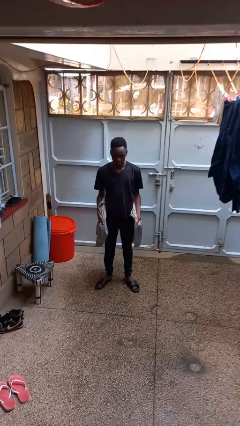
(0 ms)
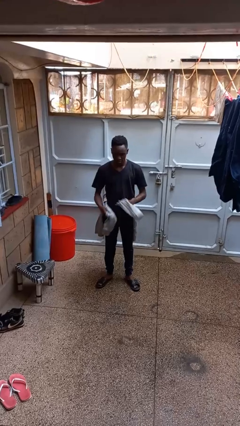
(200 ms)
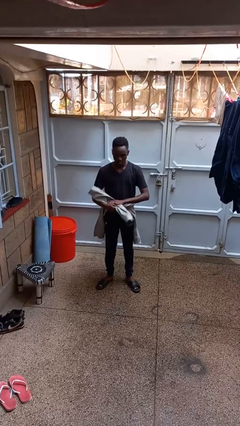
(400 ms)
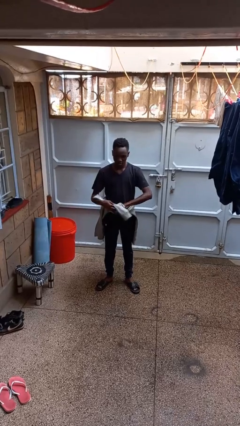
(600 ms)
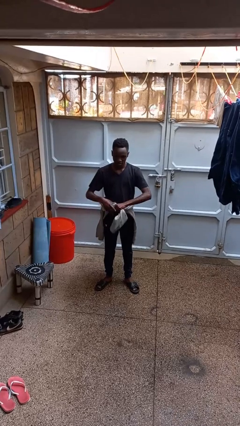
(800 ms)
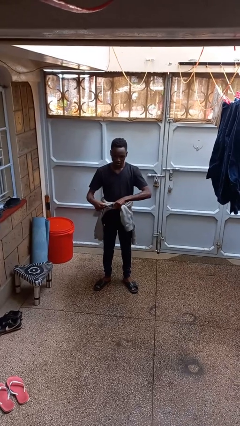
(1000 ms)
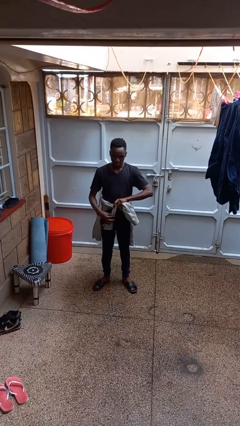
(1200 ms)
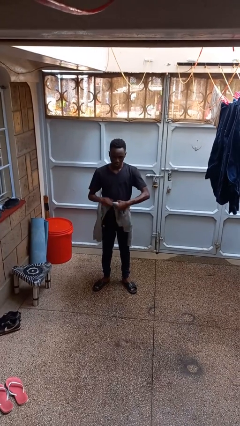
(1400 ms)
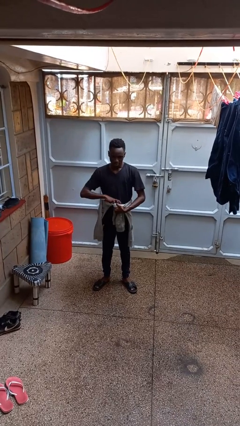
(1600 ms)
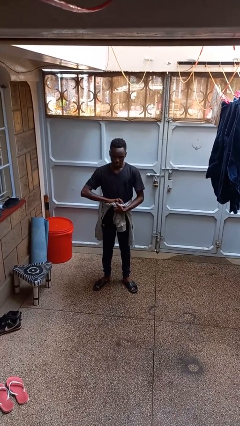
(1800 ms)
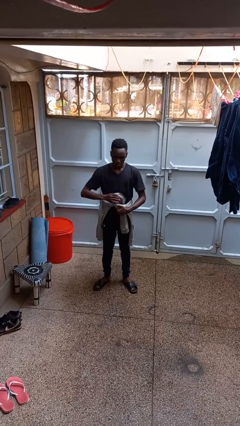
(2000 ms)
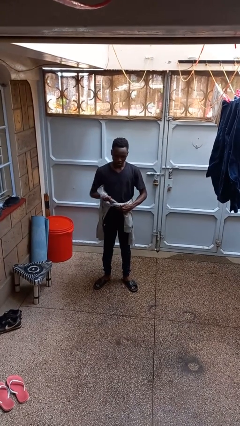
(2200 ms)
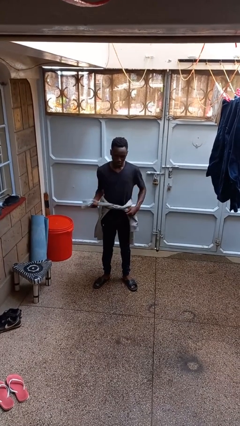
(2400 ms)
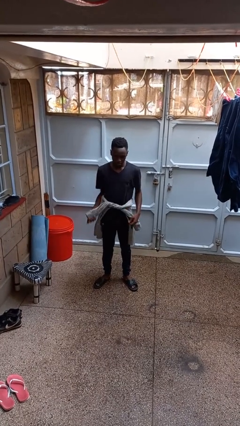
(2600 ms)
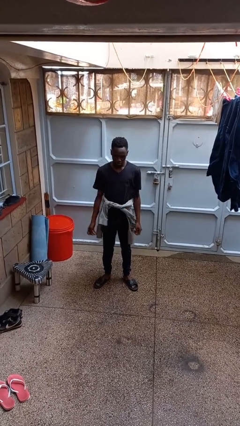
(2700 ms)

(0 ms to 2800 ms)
person ties jacket around waist

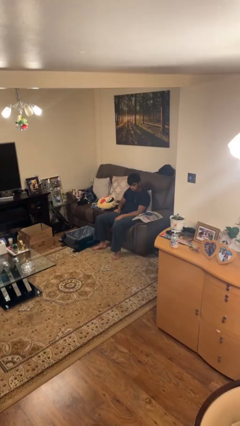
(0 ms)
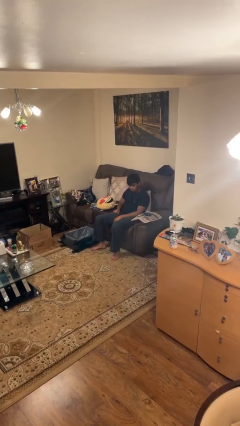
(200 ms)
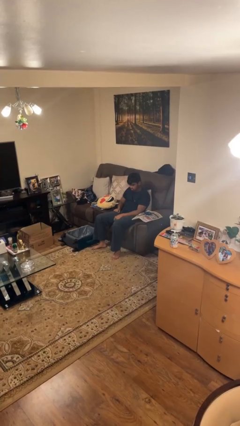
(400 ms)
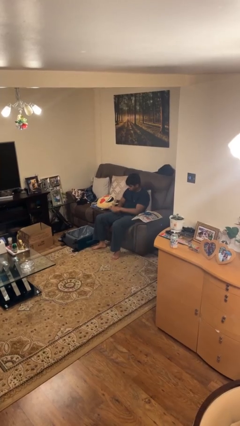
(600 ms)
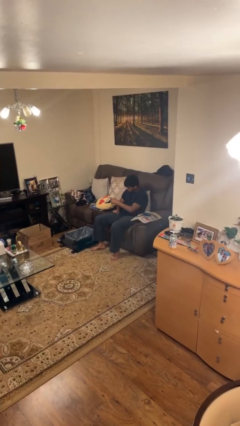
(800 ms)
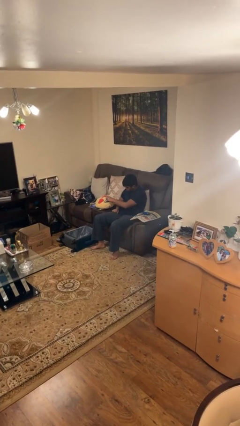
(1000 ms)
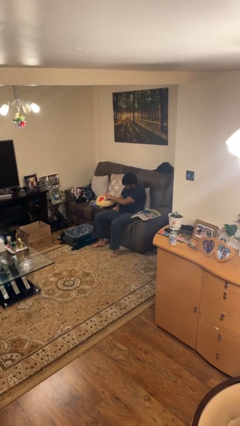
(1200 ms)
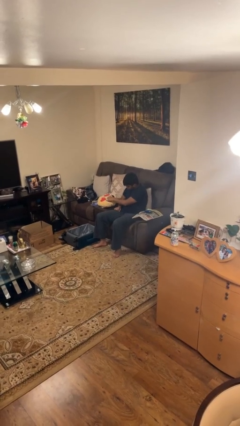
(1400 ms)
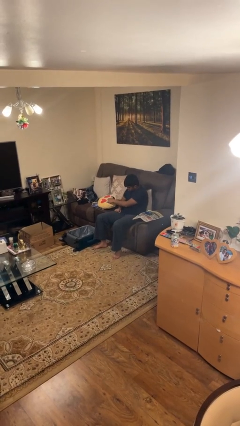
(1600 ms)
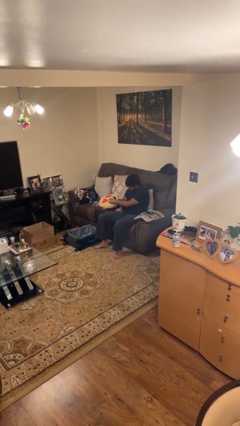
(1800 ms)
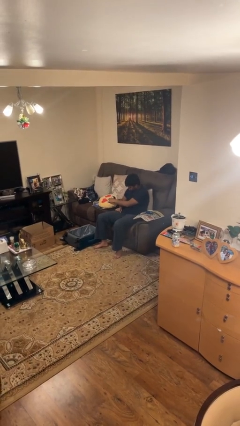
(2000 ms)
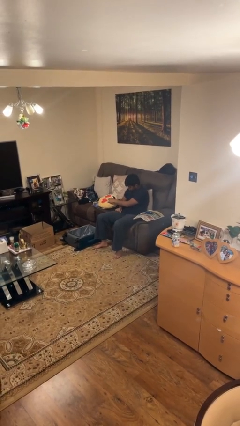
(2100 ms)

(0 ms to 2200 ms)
person taps object with finger

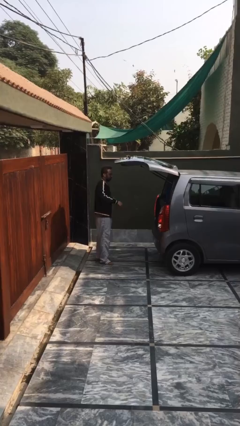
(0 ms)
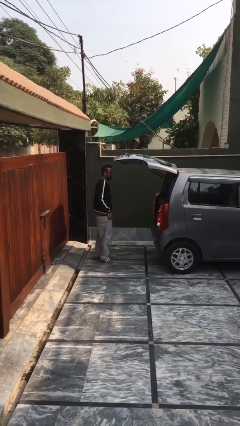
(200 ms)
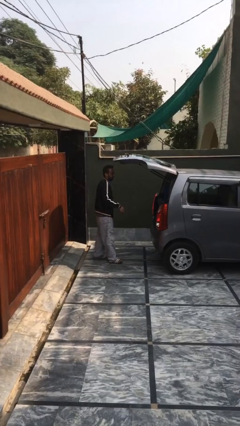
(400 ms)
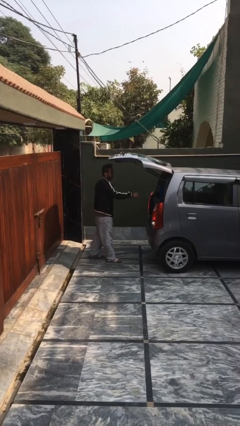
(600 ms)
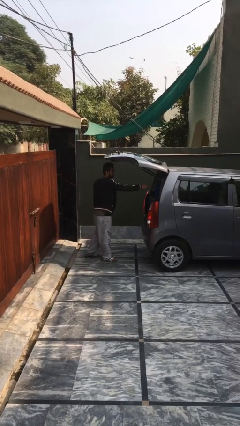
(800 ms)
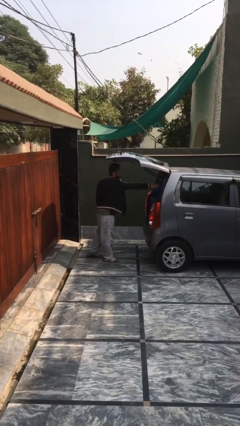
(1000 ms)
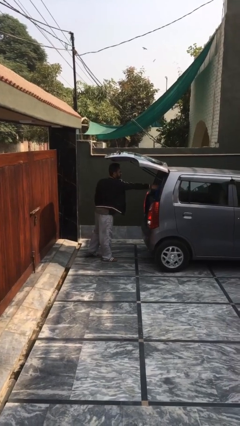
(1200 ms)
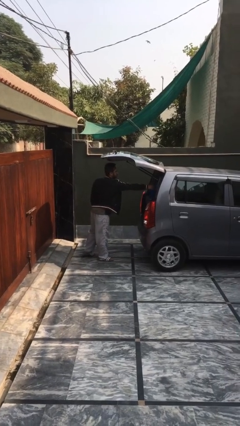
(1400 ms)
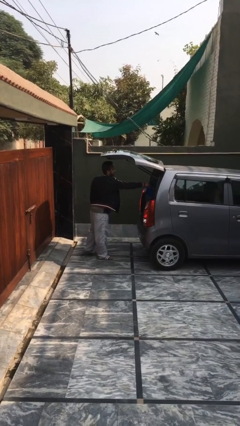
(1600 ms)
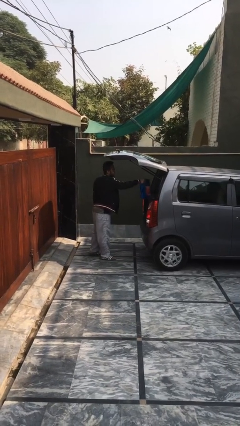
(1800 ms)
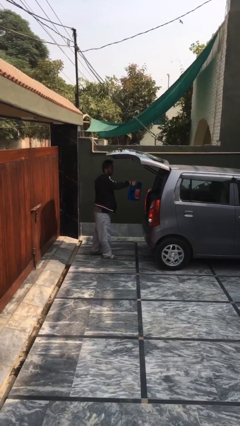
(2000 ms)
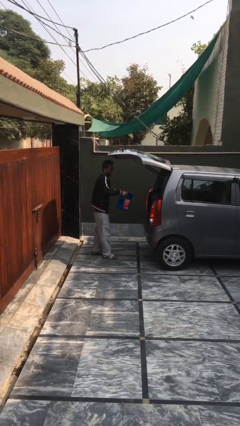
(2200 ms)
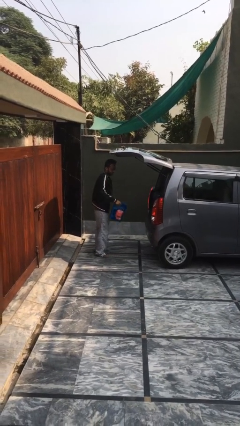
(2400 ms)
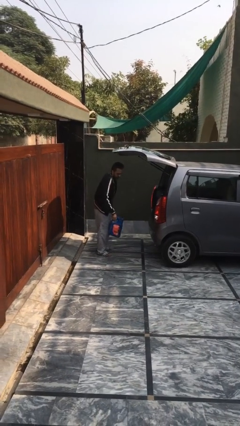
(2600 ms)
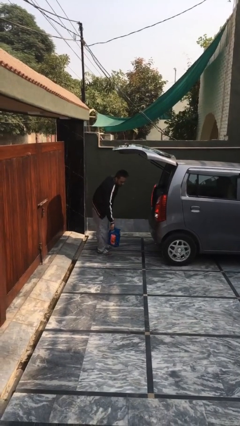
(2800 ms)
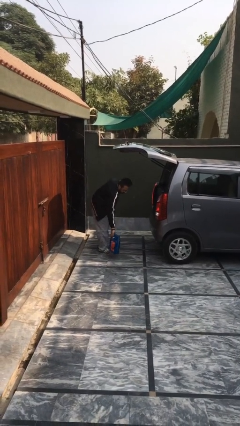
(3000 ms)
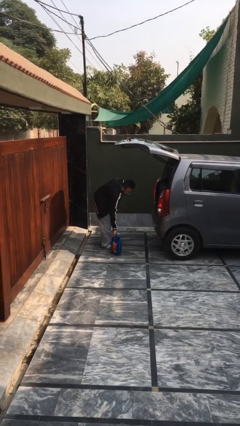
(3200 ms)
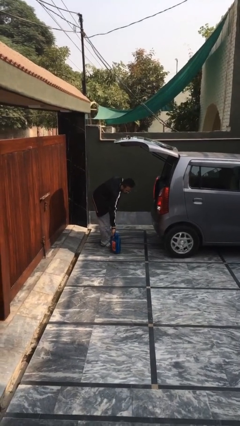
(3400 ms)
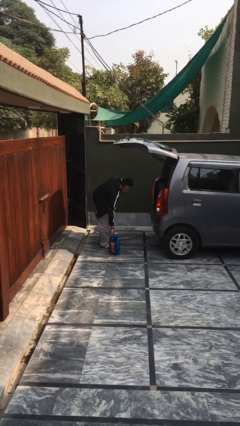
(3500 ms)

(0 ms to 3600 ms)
person unloads car

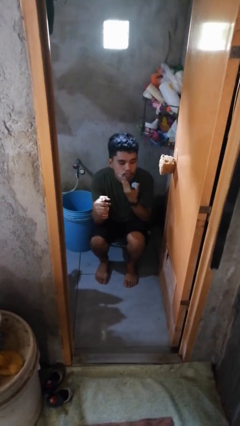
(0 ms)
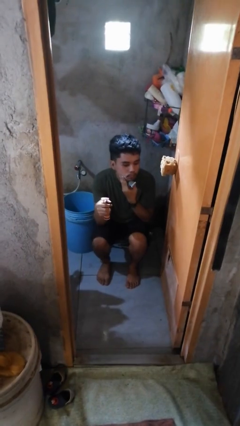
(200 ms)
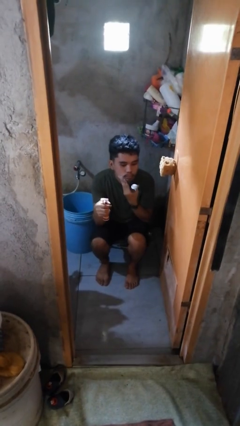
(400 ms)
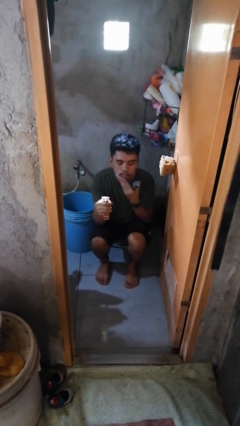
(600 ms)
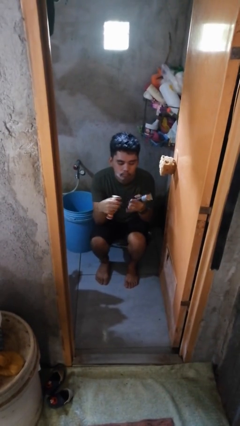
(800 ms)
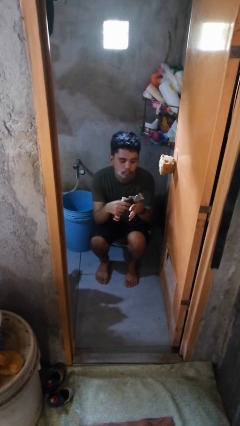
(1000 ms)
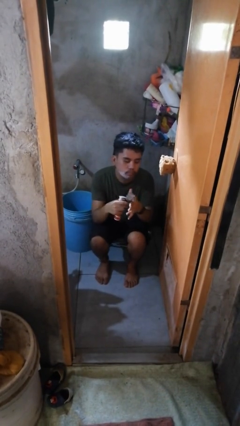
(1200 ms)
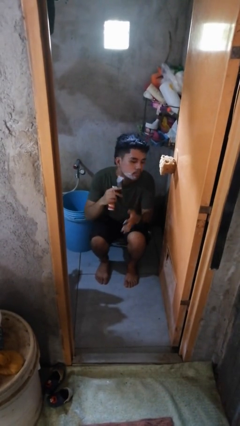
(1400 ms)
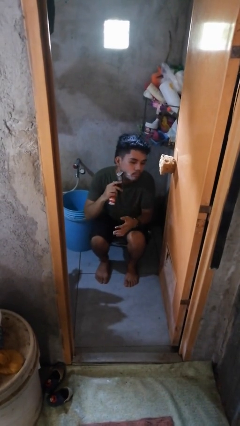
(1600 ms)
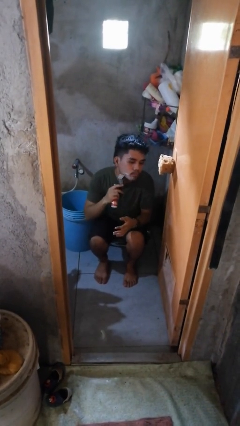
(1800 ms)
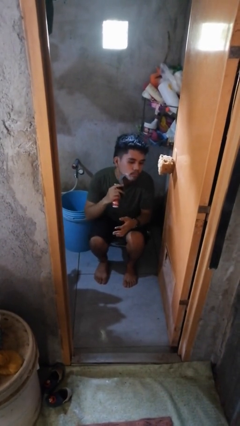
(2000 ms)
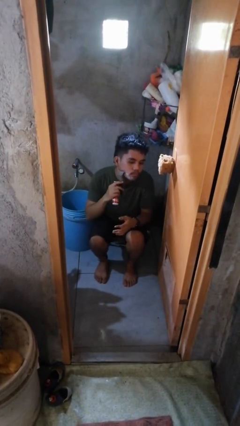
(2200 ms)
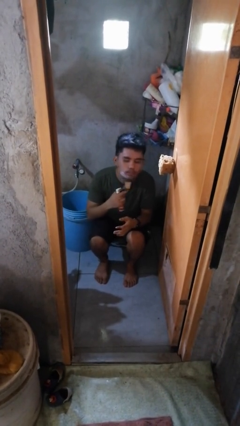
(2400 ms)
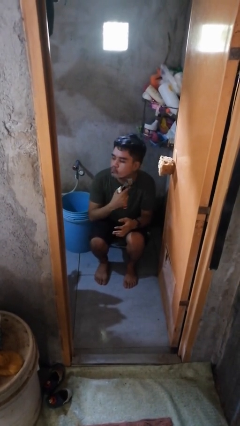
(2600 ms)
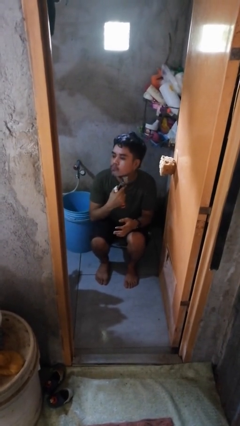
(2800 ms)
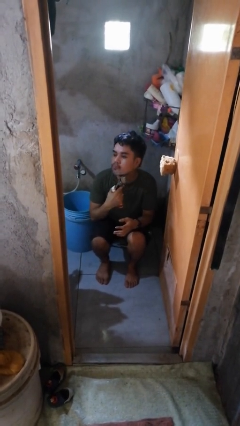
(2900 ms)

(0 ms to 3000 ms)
person shaves face

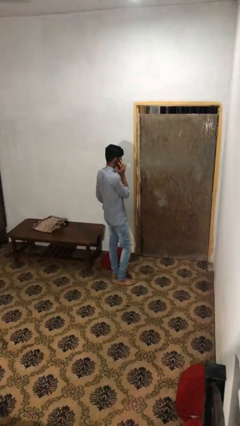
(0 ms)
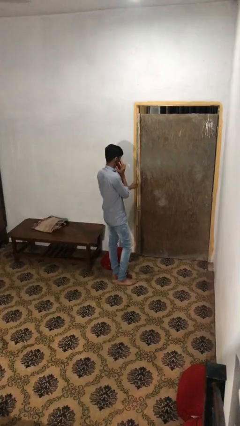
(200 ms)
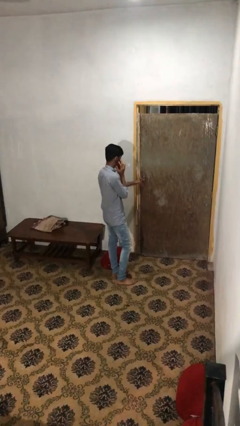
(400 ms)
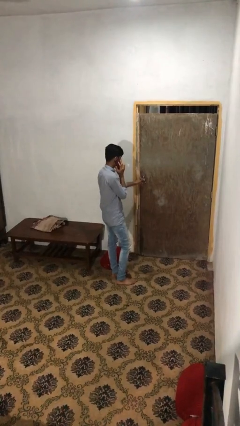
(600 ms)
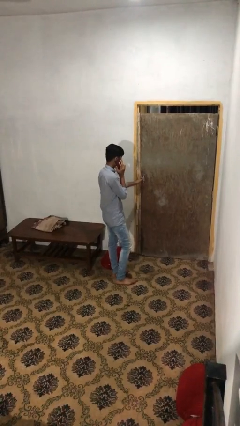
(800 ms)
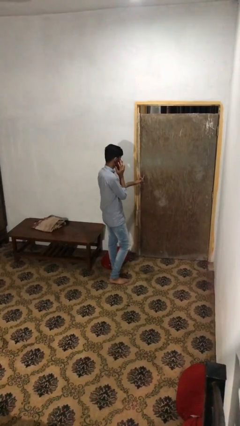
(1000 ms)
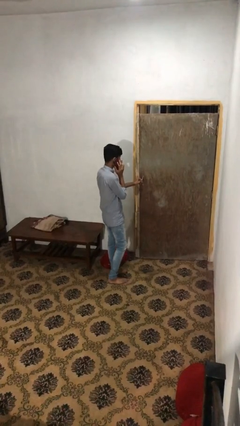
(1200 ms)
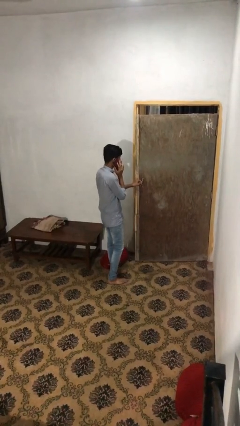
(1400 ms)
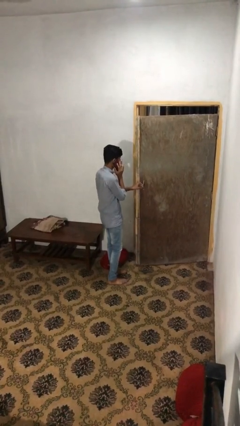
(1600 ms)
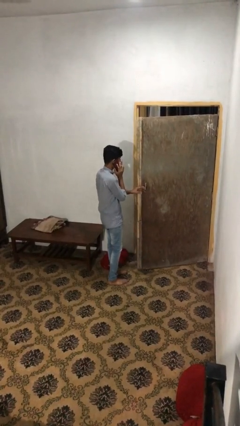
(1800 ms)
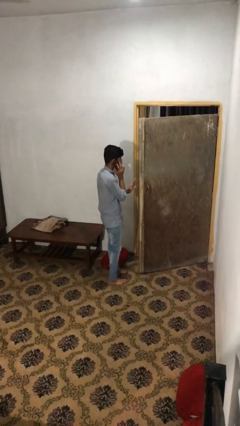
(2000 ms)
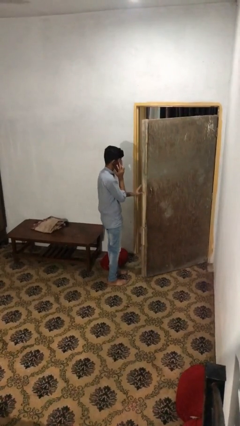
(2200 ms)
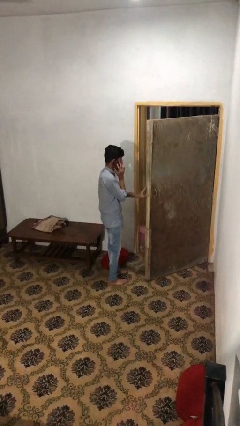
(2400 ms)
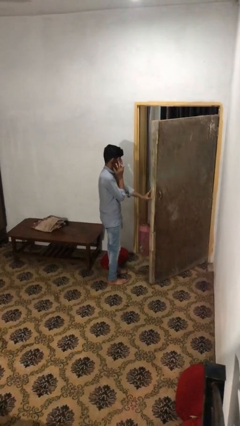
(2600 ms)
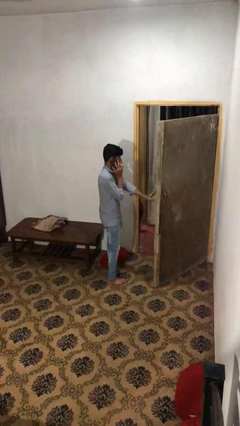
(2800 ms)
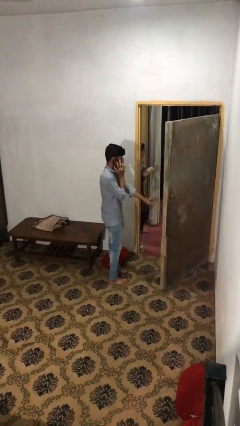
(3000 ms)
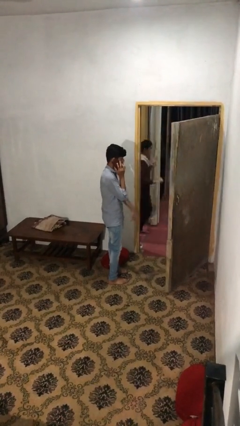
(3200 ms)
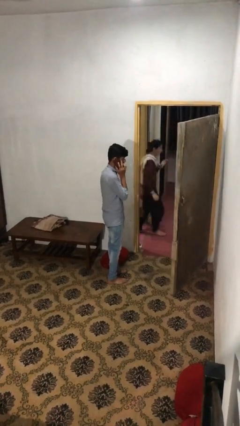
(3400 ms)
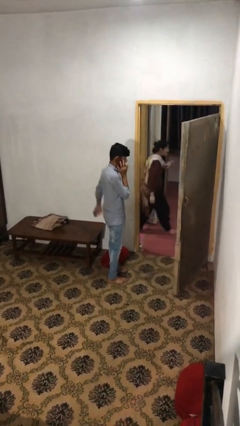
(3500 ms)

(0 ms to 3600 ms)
person opens facility door

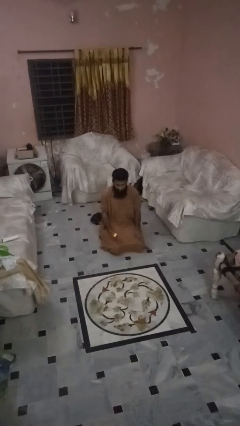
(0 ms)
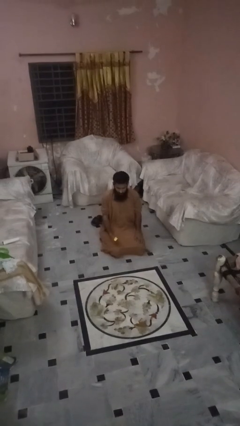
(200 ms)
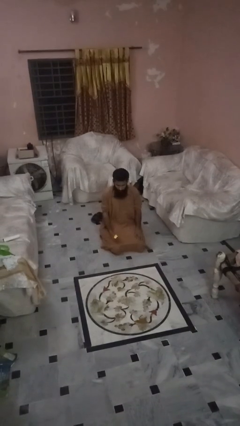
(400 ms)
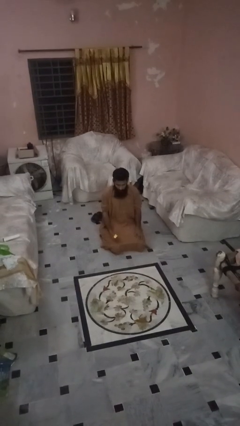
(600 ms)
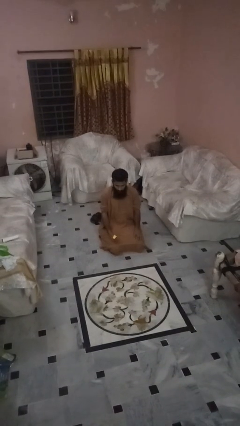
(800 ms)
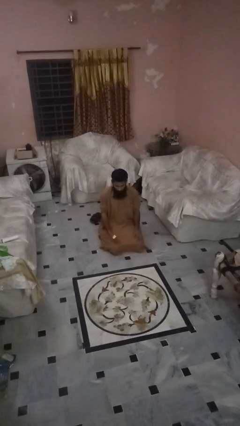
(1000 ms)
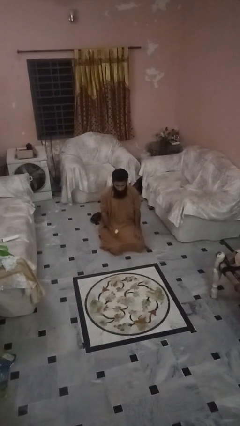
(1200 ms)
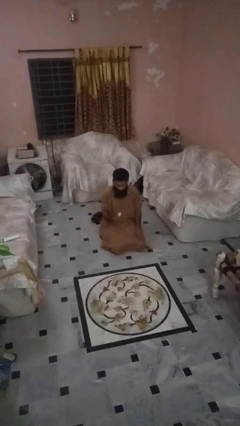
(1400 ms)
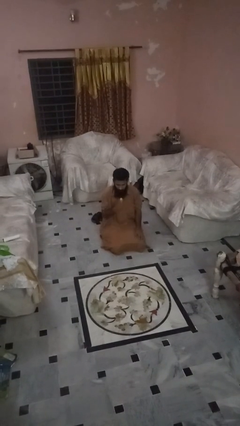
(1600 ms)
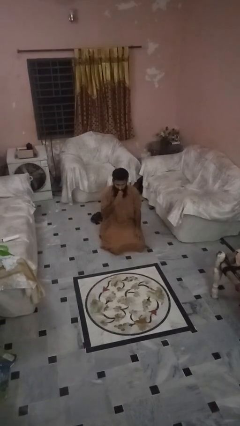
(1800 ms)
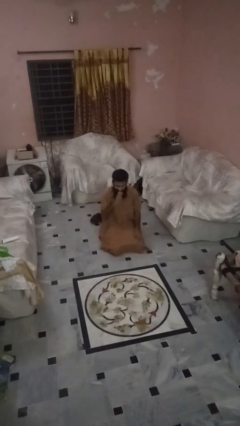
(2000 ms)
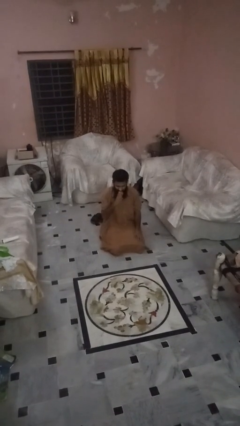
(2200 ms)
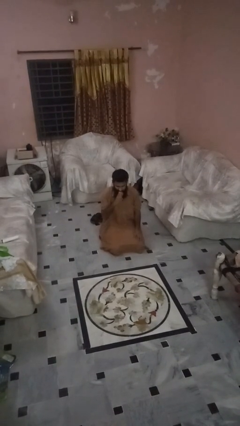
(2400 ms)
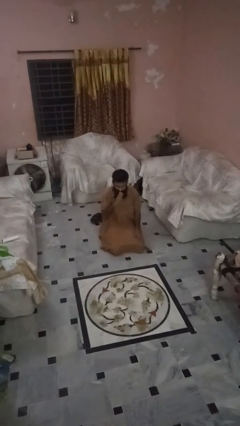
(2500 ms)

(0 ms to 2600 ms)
person eats apple
